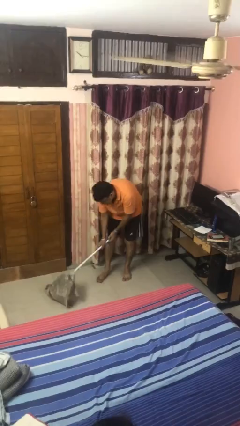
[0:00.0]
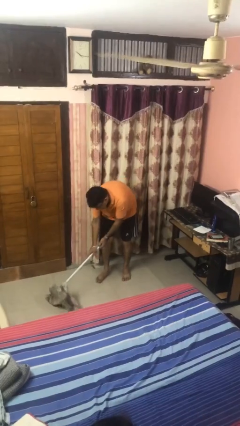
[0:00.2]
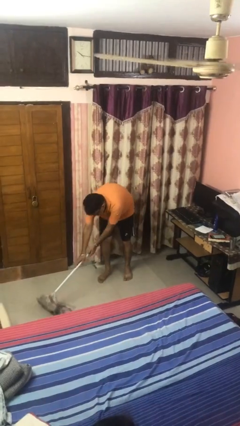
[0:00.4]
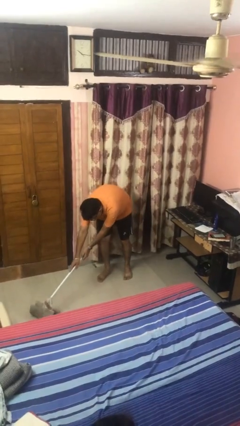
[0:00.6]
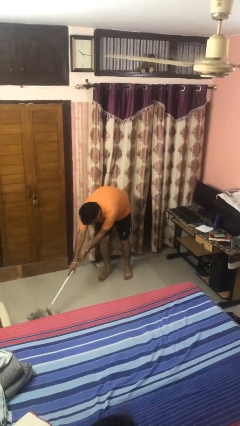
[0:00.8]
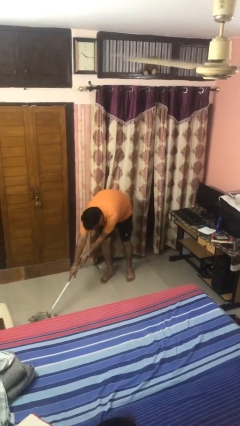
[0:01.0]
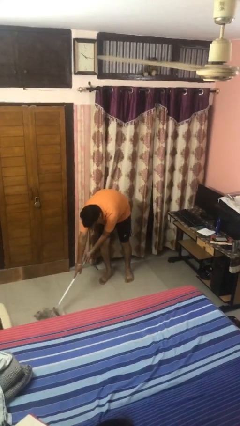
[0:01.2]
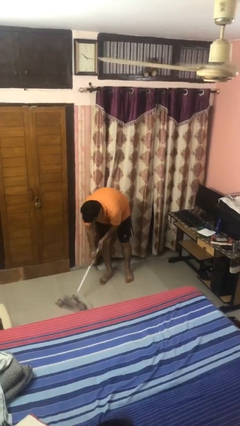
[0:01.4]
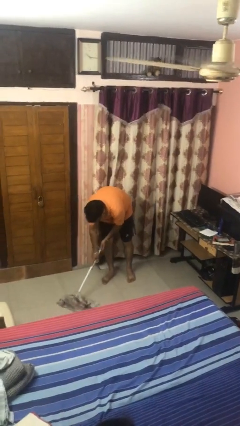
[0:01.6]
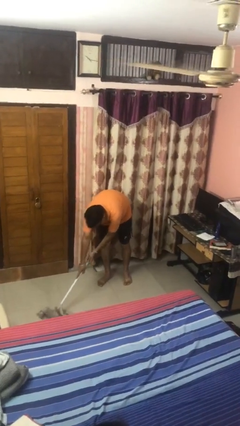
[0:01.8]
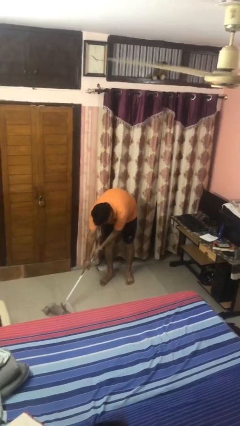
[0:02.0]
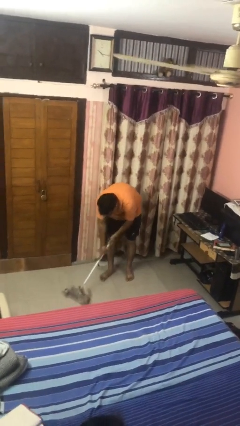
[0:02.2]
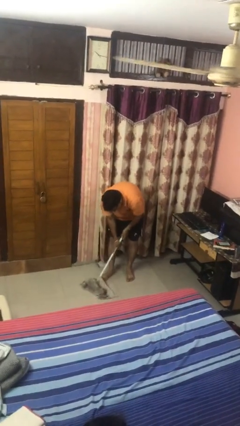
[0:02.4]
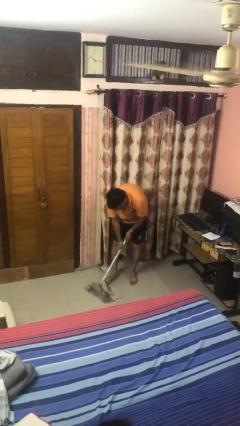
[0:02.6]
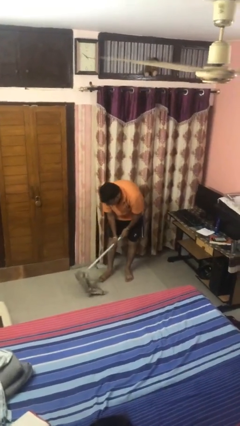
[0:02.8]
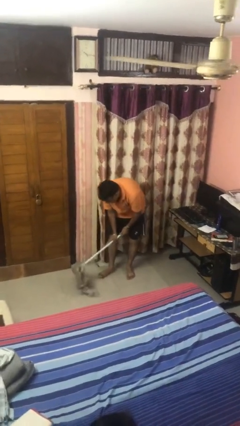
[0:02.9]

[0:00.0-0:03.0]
person mops

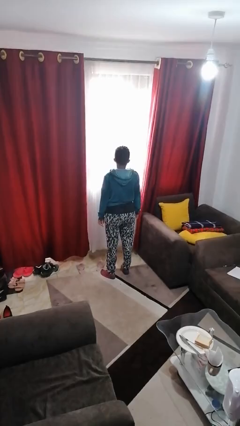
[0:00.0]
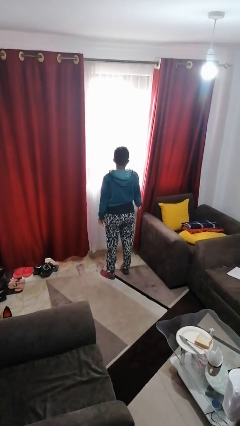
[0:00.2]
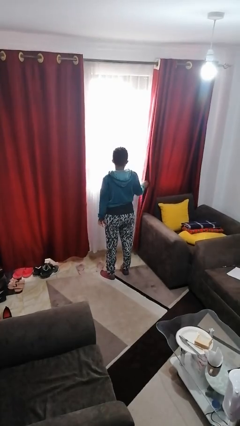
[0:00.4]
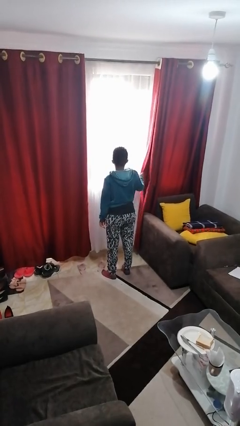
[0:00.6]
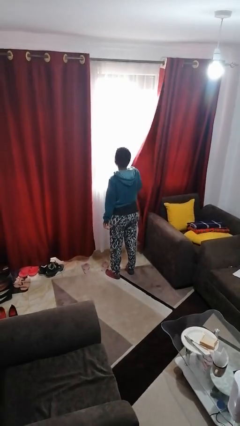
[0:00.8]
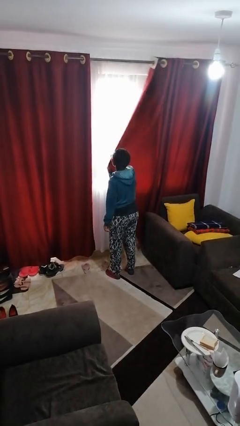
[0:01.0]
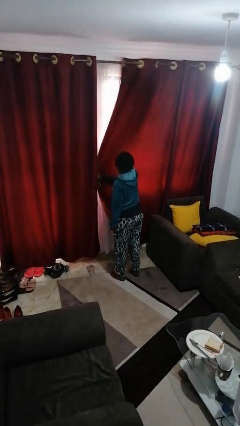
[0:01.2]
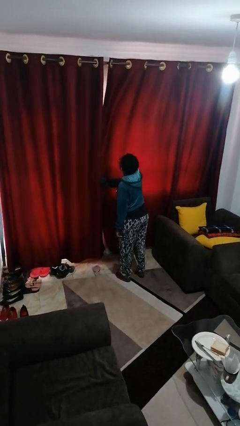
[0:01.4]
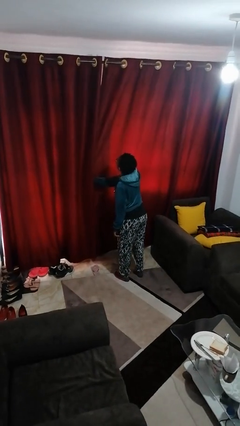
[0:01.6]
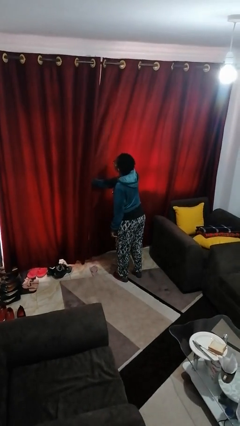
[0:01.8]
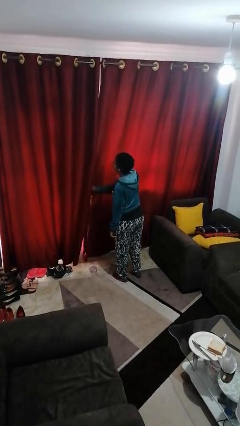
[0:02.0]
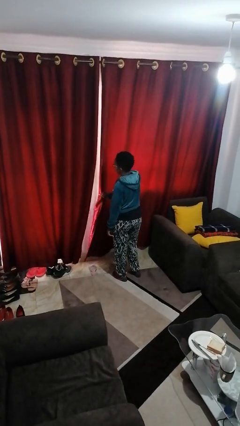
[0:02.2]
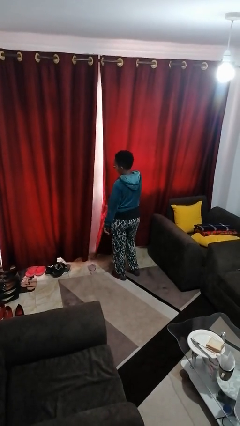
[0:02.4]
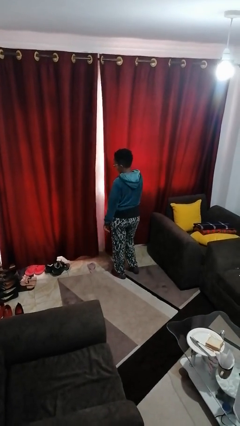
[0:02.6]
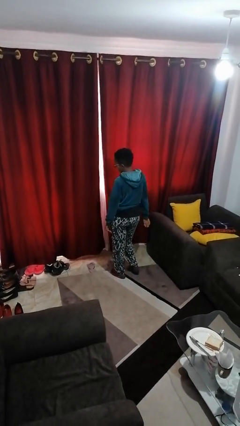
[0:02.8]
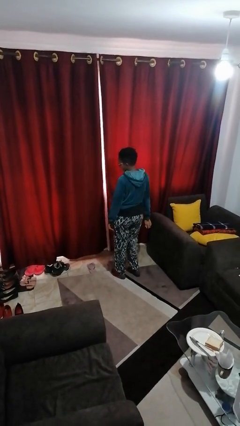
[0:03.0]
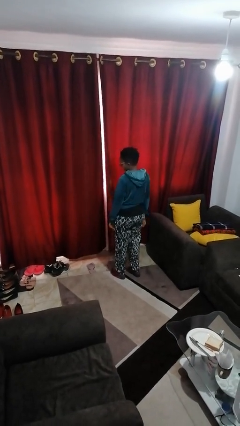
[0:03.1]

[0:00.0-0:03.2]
person closes curtains

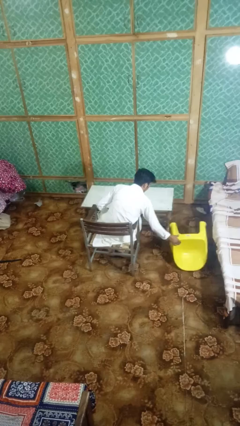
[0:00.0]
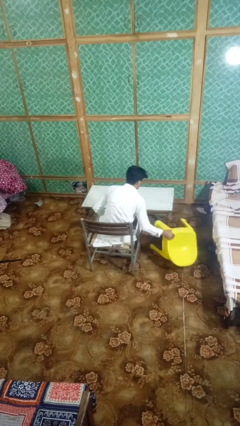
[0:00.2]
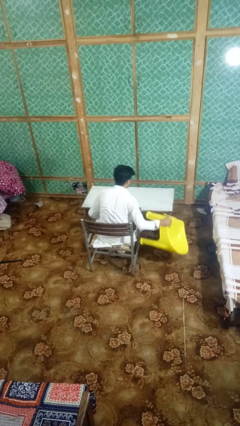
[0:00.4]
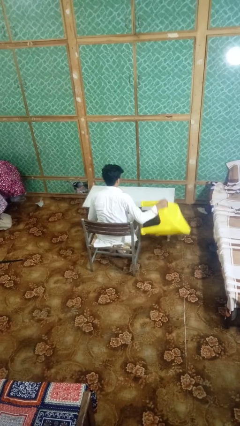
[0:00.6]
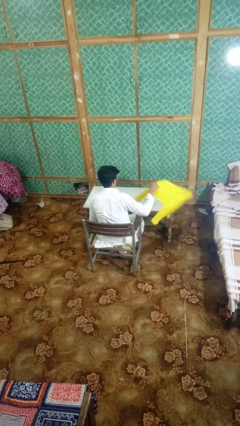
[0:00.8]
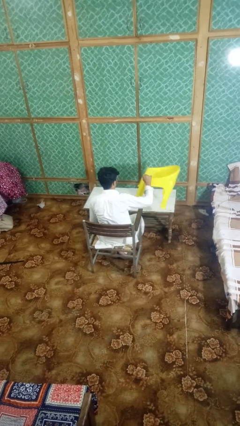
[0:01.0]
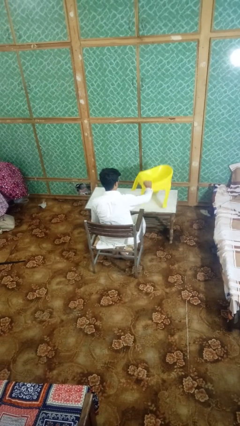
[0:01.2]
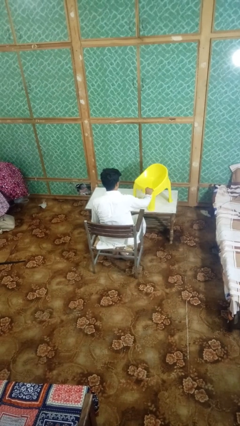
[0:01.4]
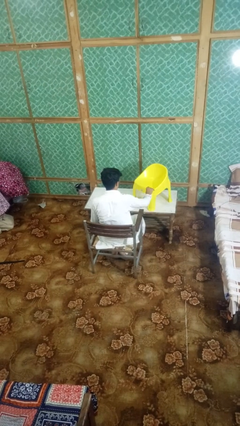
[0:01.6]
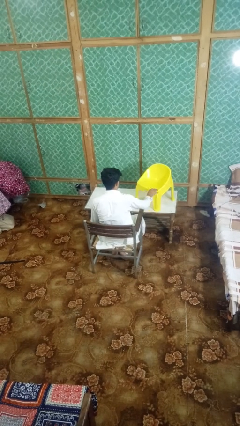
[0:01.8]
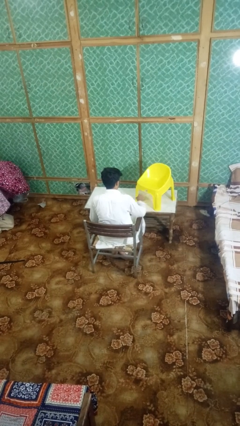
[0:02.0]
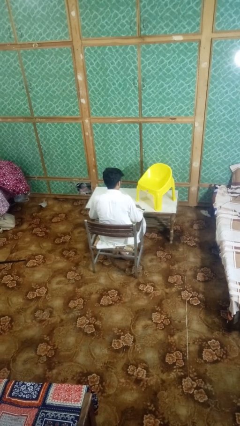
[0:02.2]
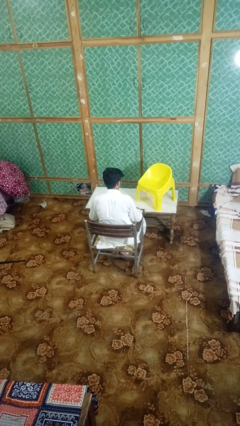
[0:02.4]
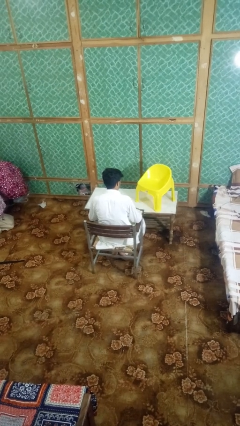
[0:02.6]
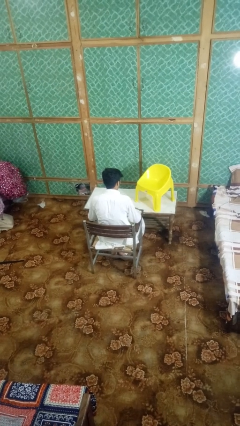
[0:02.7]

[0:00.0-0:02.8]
person sets upright furniture

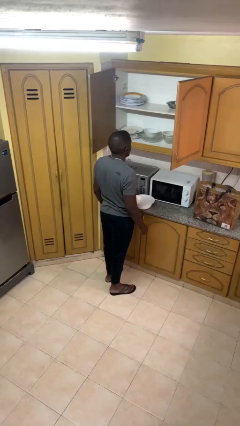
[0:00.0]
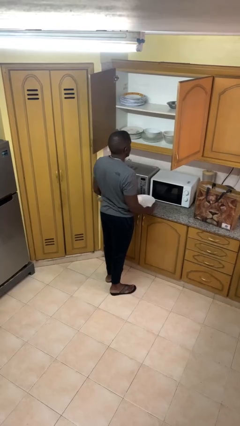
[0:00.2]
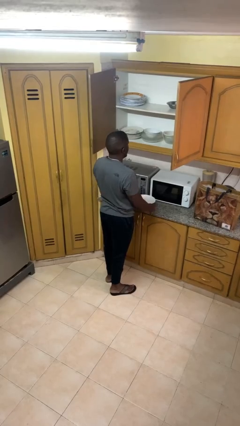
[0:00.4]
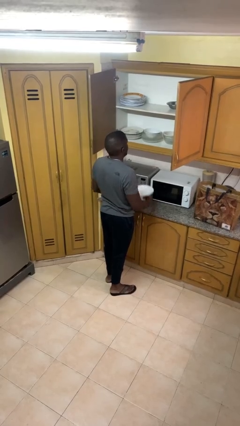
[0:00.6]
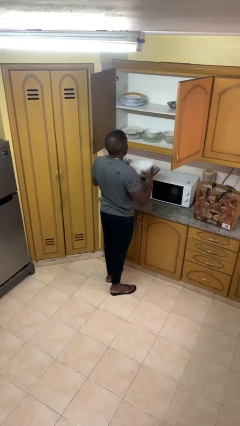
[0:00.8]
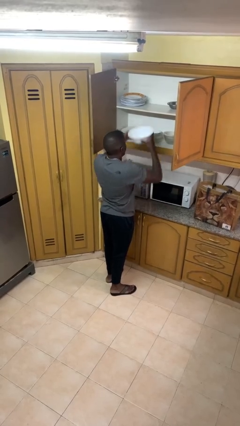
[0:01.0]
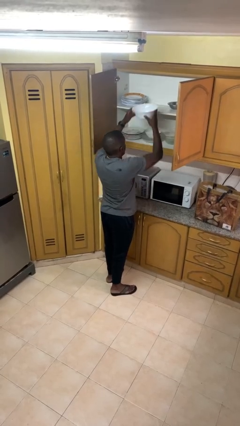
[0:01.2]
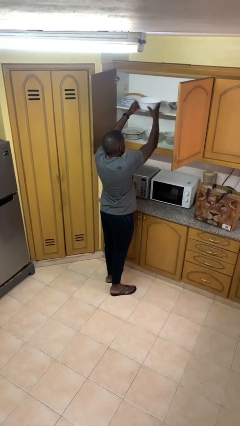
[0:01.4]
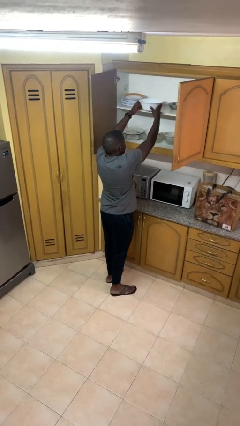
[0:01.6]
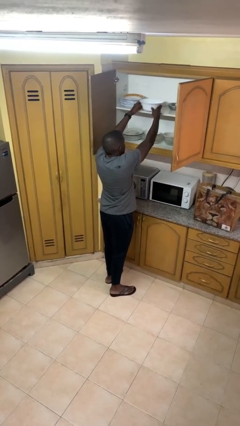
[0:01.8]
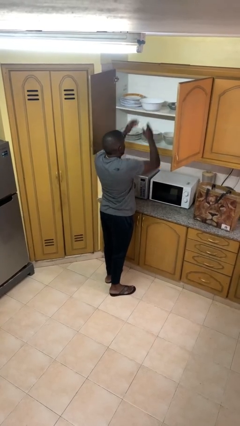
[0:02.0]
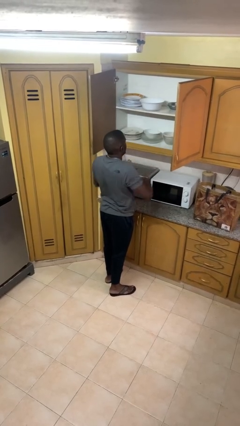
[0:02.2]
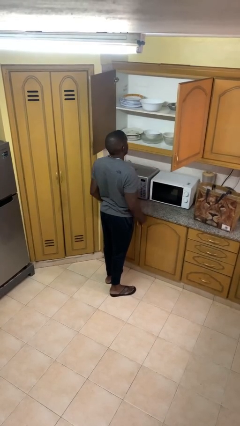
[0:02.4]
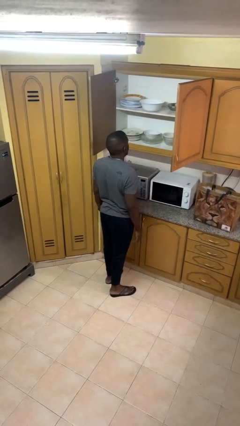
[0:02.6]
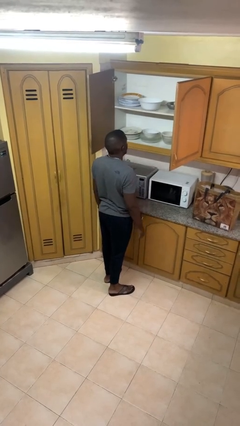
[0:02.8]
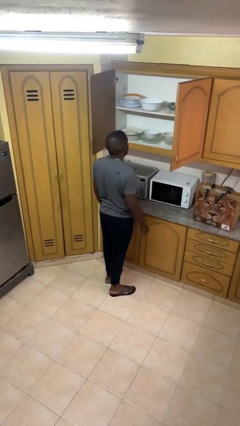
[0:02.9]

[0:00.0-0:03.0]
person puts object in cabinet

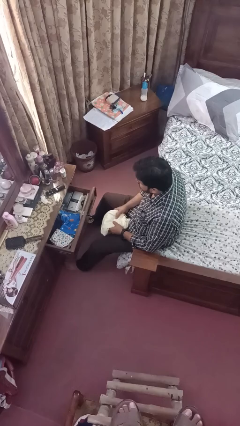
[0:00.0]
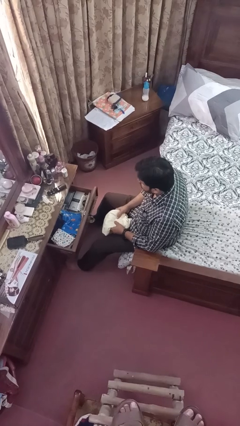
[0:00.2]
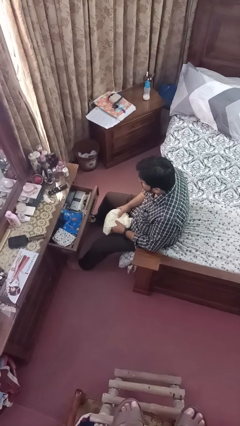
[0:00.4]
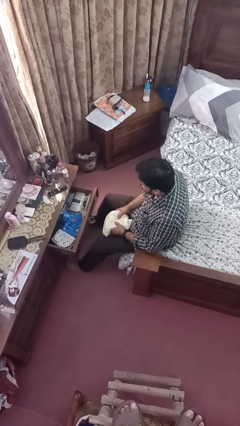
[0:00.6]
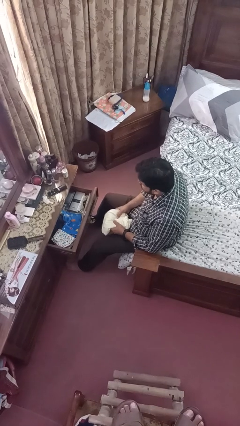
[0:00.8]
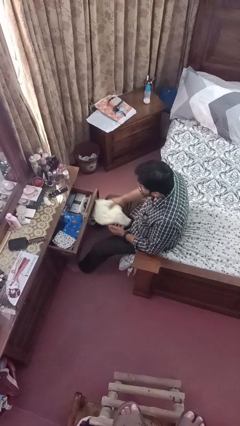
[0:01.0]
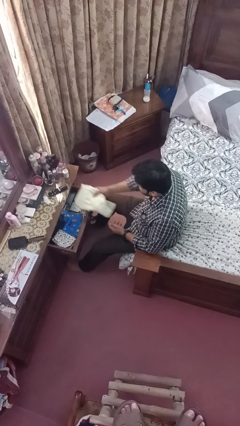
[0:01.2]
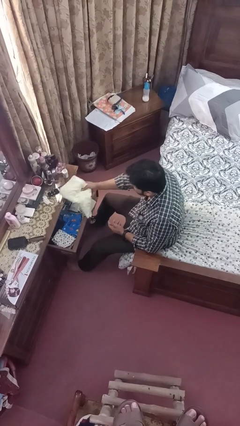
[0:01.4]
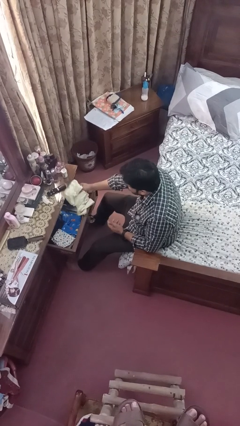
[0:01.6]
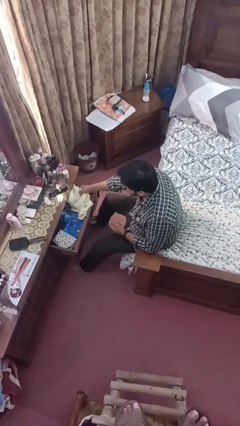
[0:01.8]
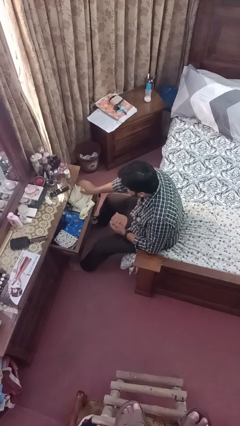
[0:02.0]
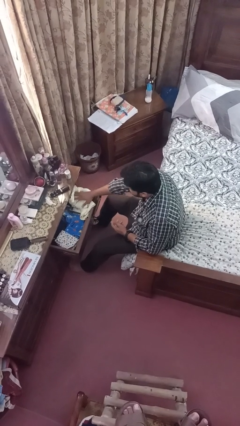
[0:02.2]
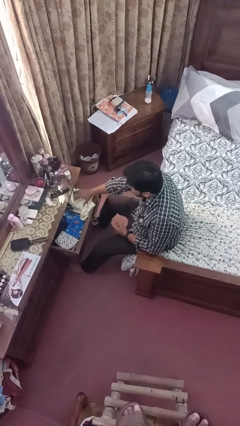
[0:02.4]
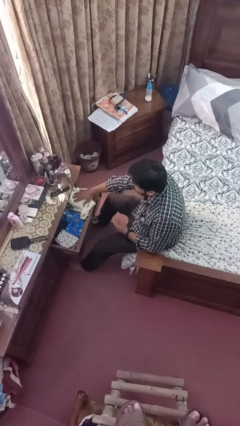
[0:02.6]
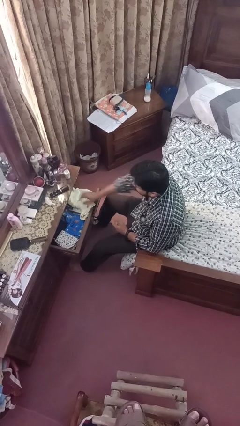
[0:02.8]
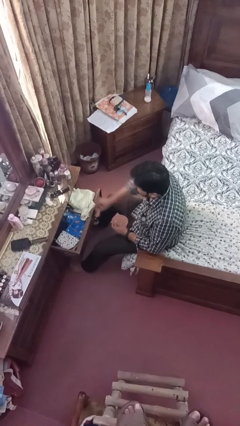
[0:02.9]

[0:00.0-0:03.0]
person puts clothes into dresser

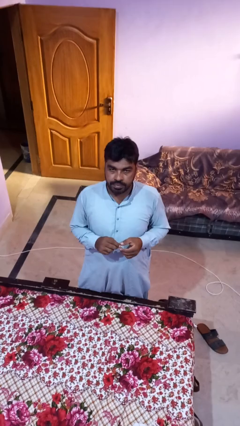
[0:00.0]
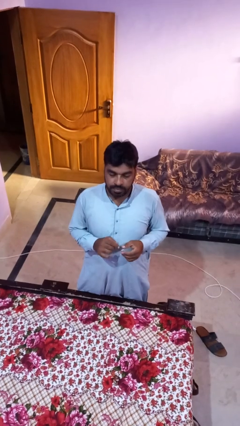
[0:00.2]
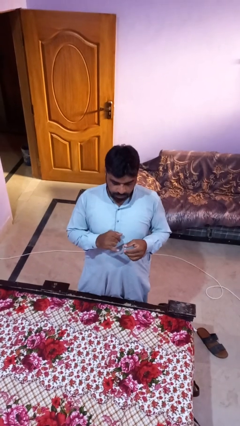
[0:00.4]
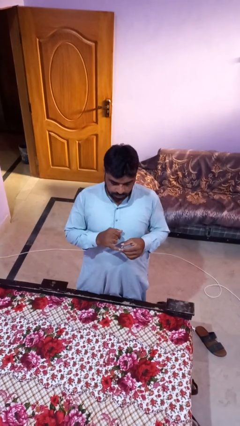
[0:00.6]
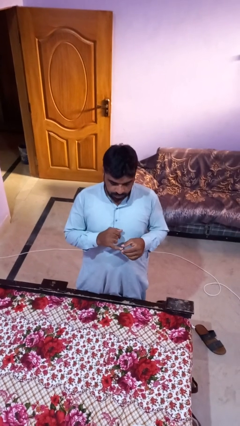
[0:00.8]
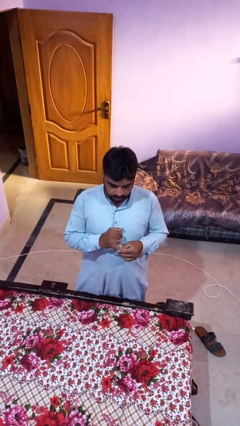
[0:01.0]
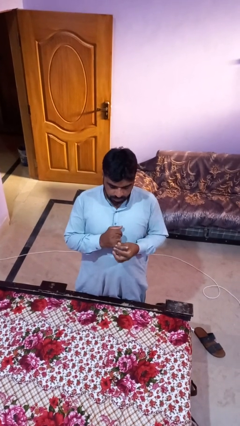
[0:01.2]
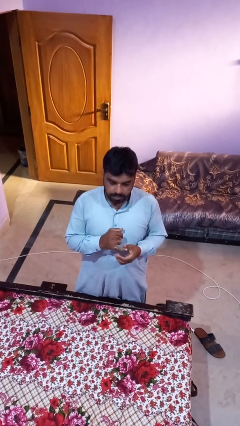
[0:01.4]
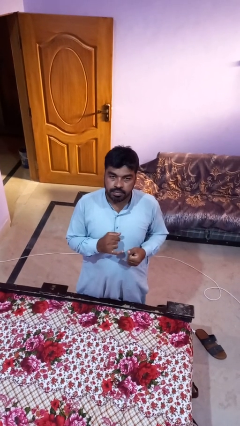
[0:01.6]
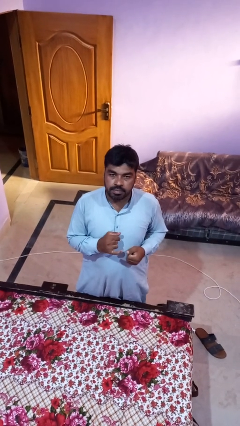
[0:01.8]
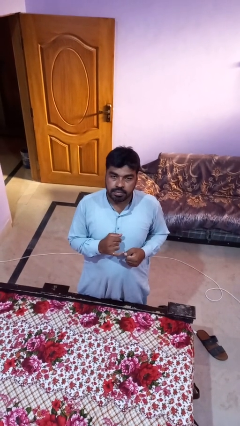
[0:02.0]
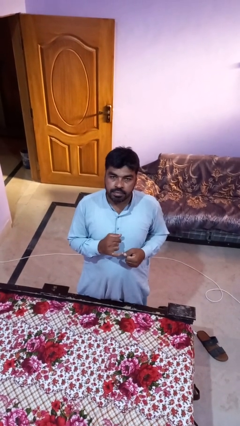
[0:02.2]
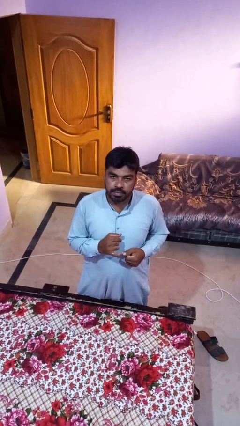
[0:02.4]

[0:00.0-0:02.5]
person puts on ring

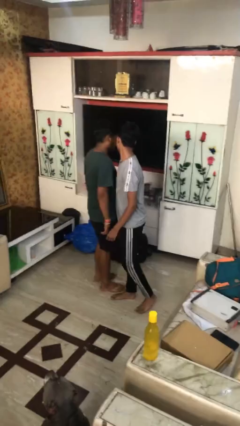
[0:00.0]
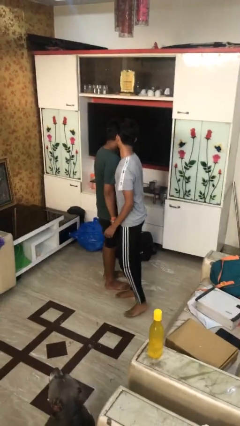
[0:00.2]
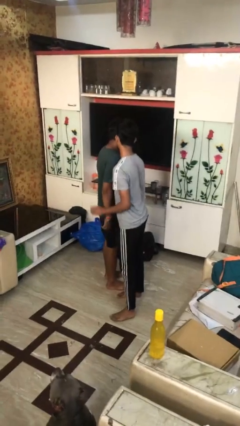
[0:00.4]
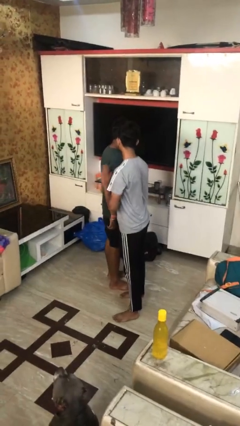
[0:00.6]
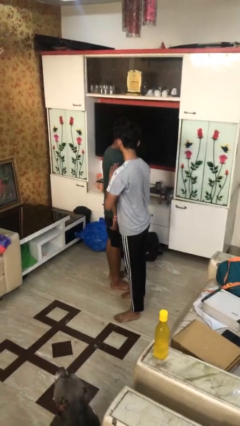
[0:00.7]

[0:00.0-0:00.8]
person bumps into person
